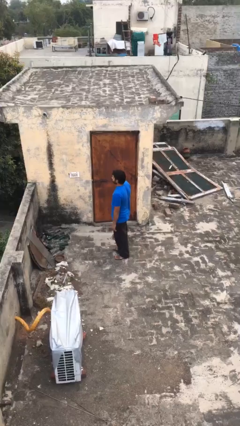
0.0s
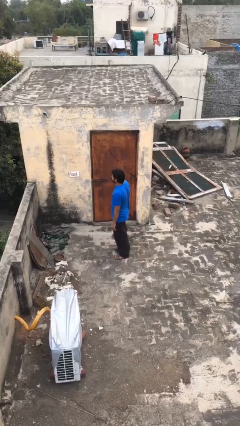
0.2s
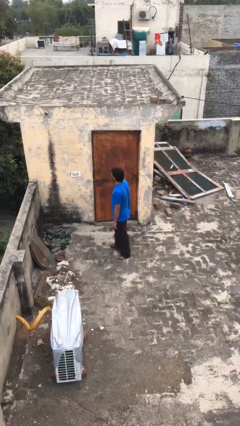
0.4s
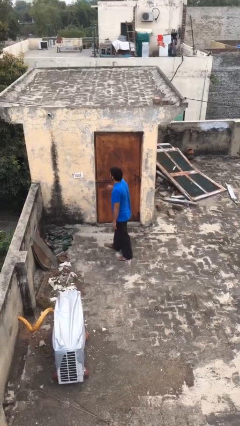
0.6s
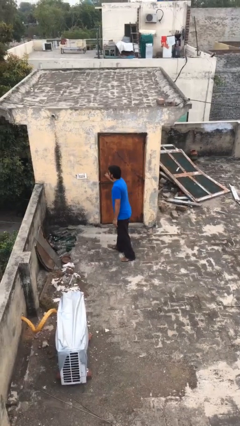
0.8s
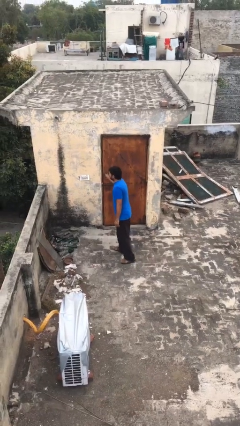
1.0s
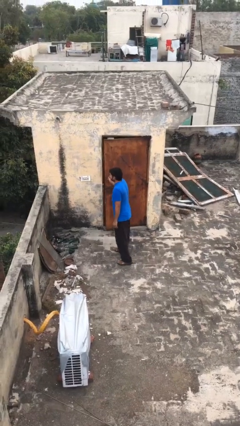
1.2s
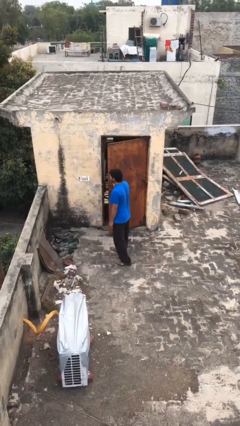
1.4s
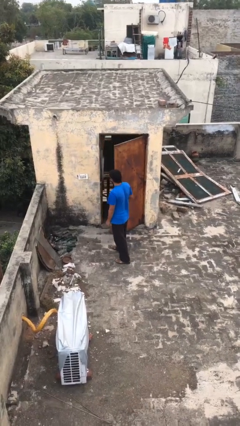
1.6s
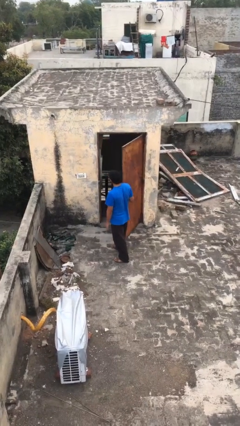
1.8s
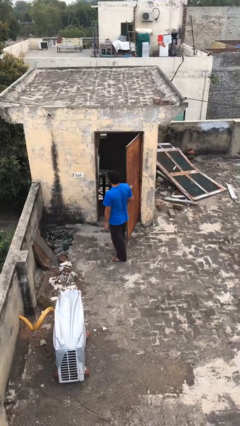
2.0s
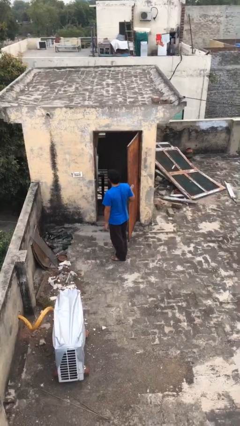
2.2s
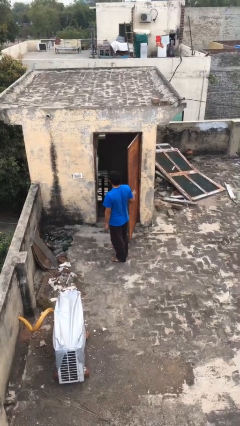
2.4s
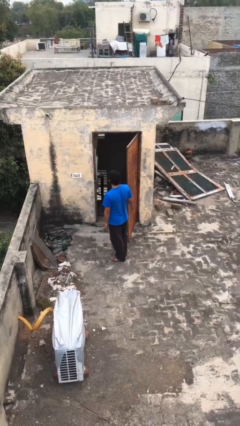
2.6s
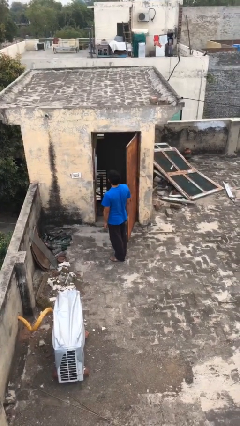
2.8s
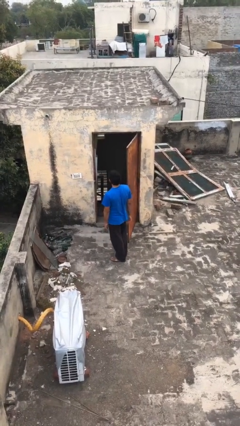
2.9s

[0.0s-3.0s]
person opens facility door

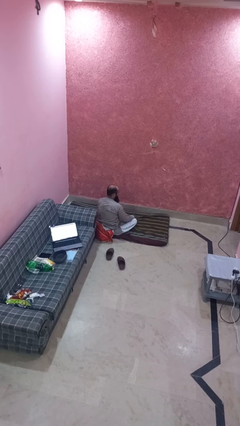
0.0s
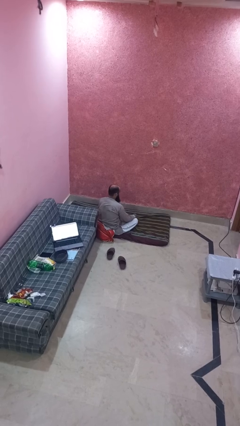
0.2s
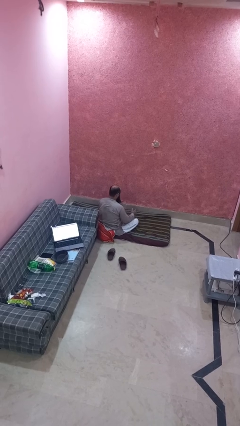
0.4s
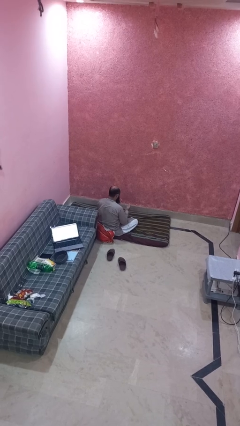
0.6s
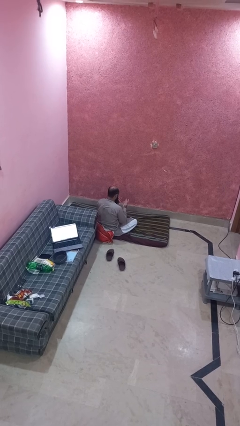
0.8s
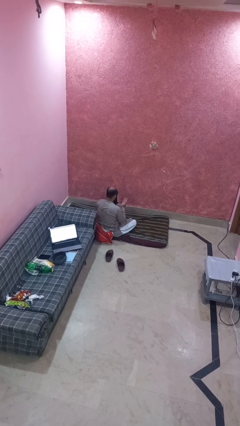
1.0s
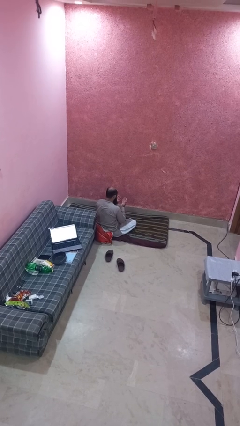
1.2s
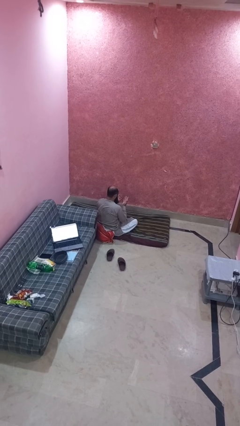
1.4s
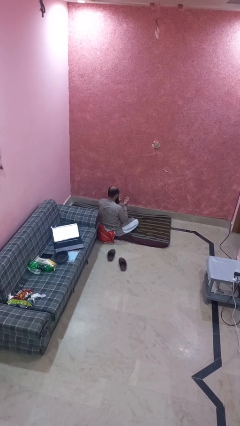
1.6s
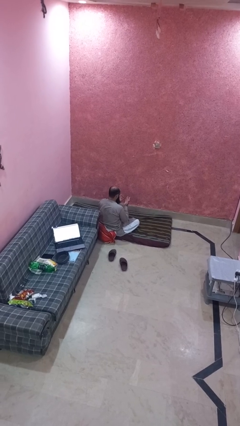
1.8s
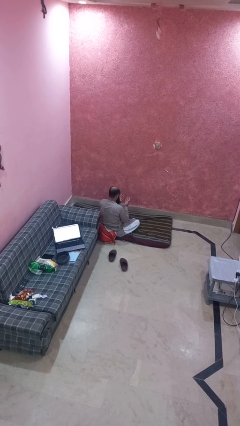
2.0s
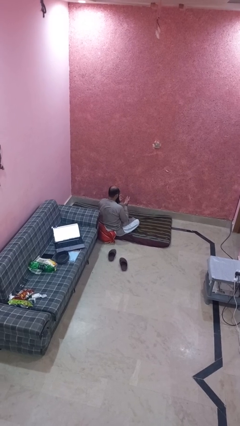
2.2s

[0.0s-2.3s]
person looks at hands in lap

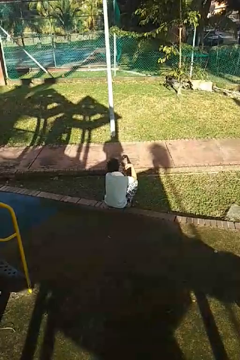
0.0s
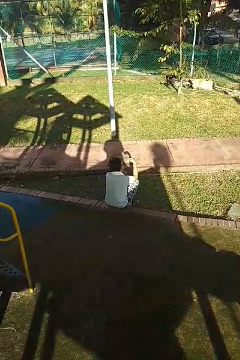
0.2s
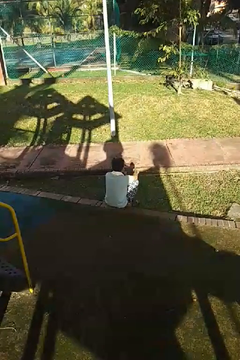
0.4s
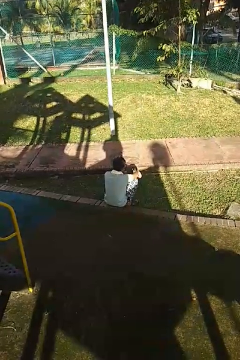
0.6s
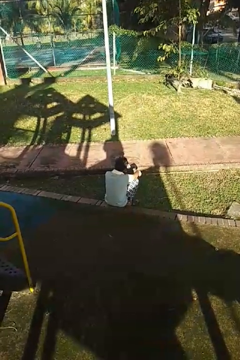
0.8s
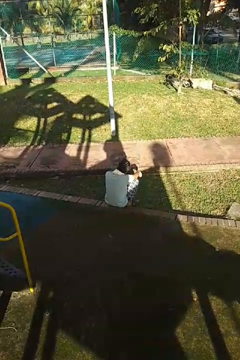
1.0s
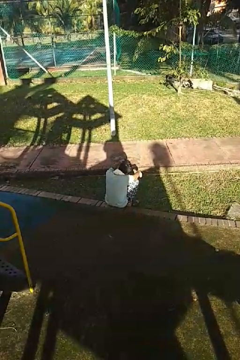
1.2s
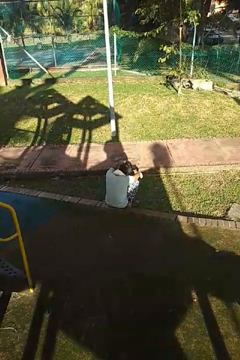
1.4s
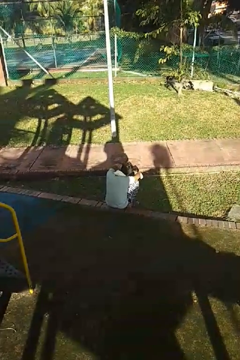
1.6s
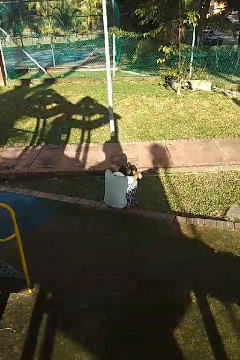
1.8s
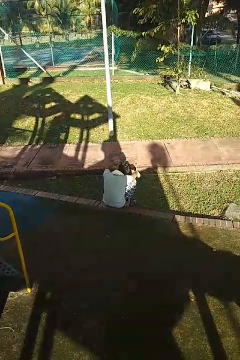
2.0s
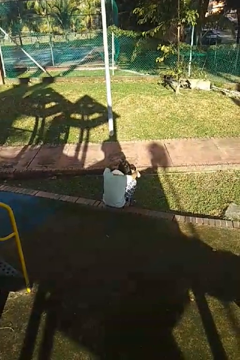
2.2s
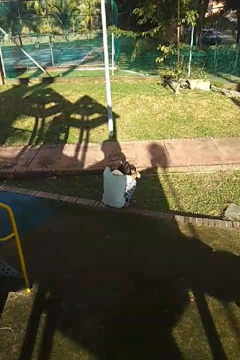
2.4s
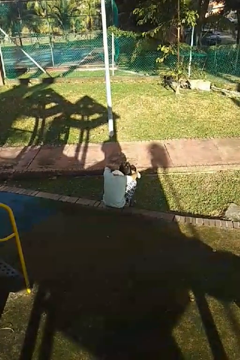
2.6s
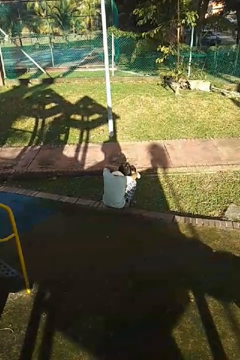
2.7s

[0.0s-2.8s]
person strokes hair

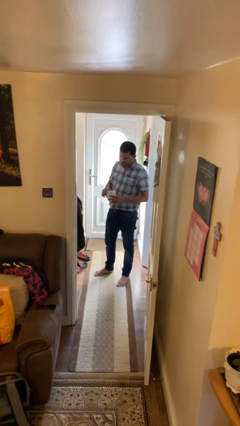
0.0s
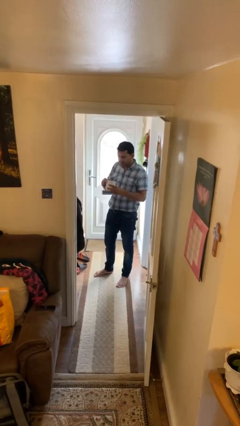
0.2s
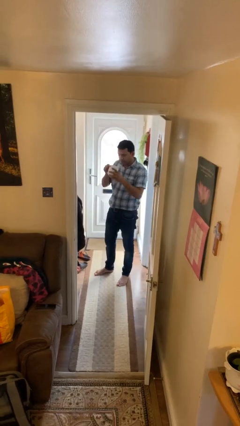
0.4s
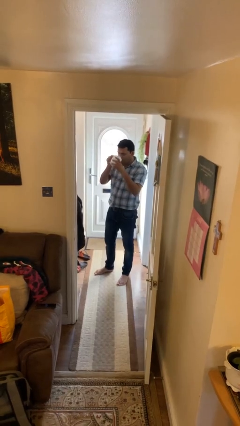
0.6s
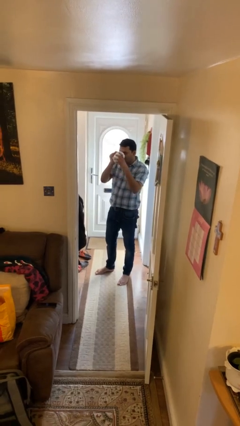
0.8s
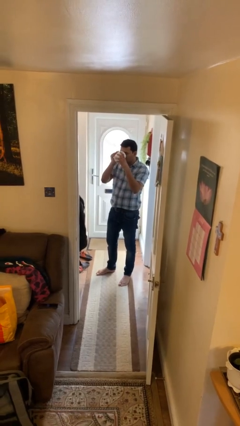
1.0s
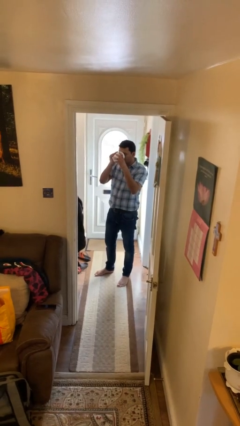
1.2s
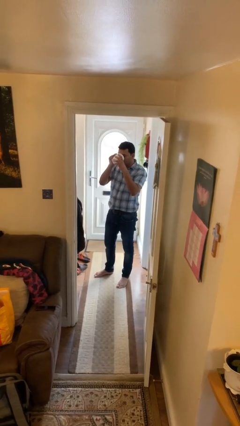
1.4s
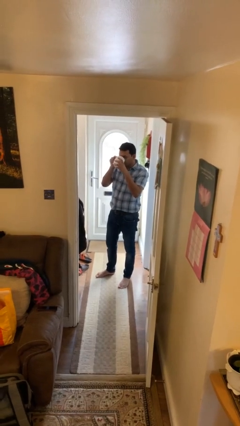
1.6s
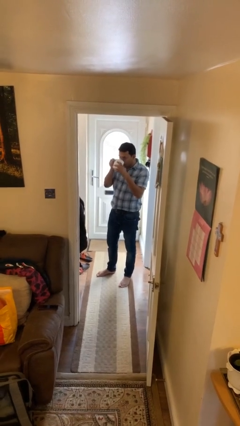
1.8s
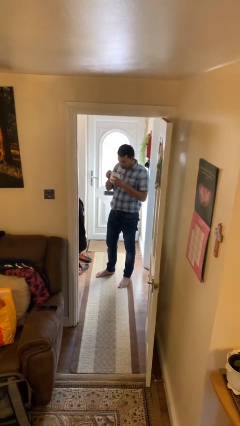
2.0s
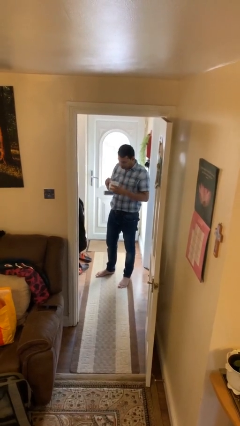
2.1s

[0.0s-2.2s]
person drinks from mug

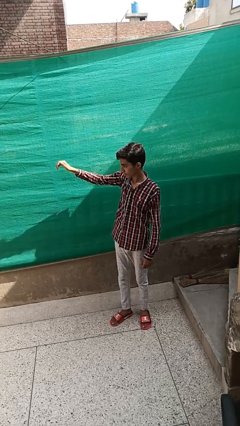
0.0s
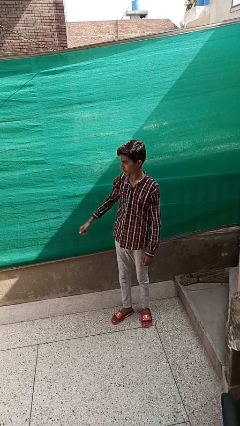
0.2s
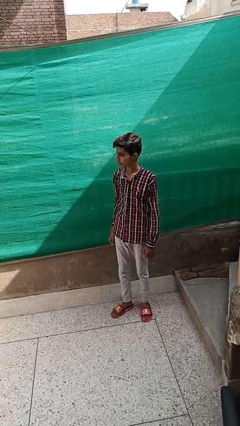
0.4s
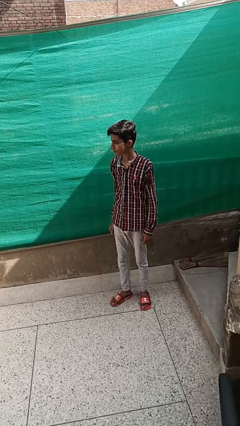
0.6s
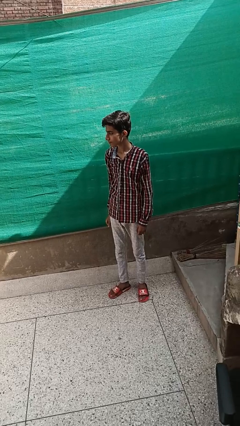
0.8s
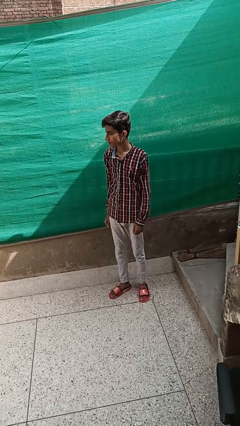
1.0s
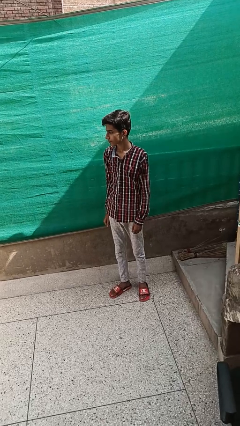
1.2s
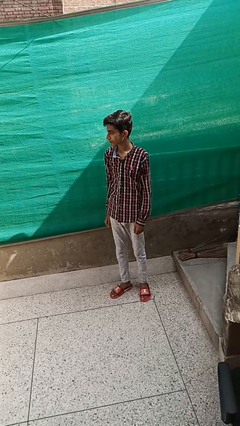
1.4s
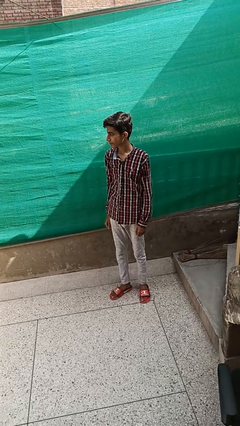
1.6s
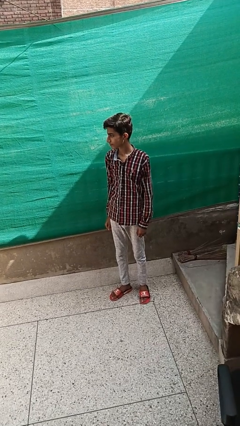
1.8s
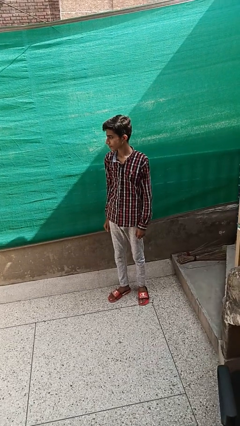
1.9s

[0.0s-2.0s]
person gestures lower hand

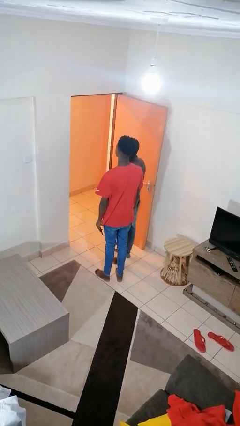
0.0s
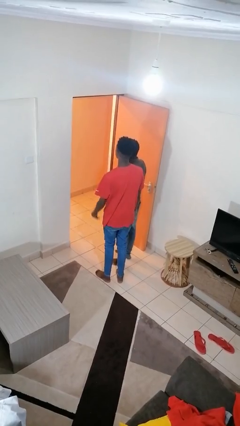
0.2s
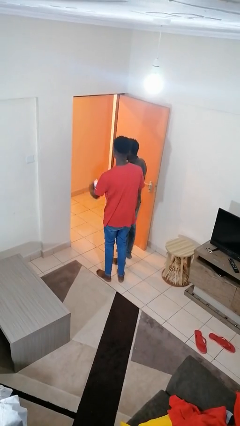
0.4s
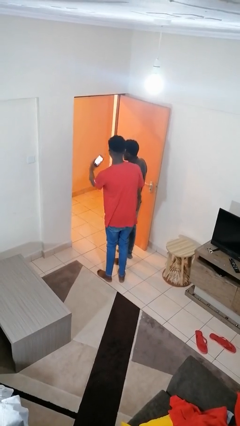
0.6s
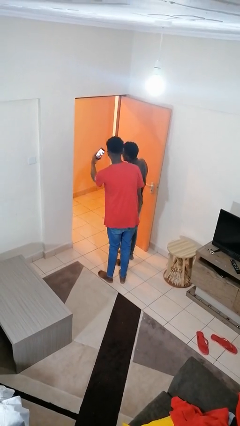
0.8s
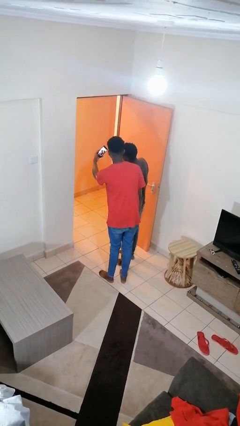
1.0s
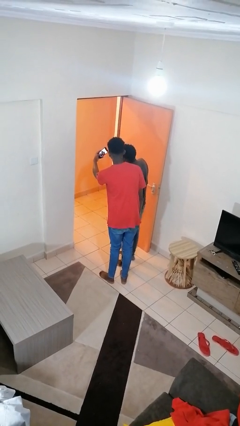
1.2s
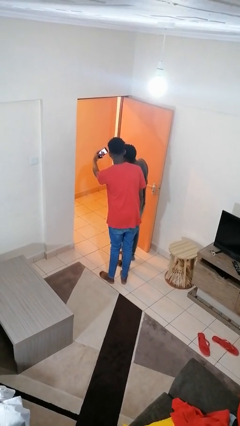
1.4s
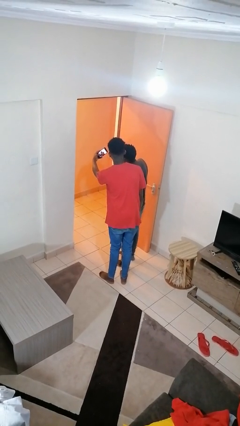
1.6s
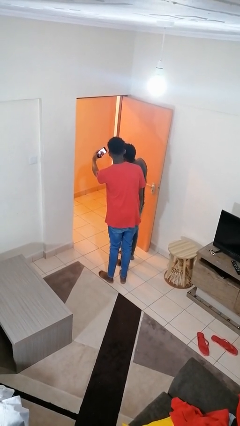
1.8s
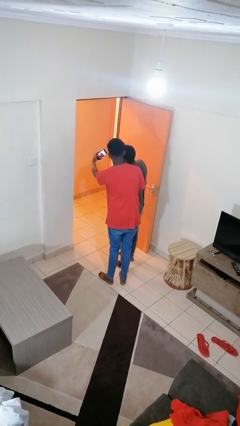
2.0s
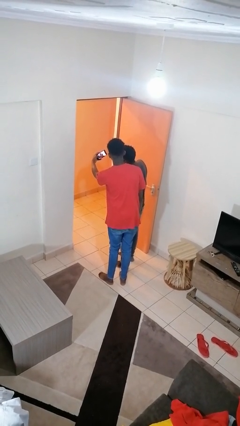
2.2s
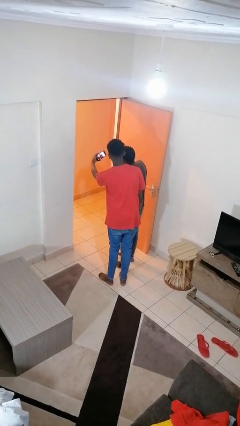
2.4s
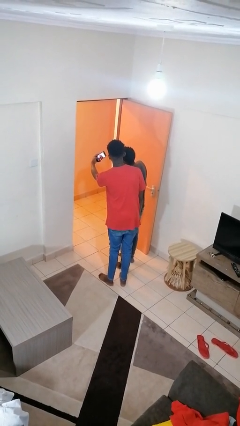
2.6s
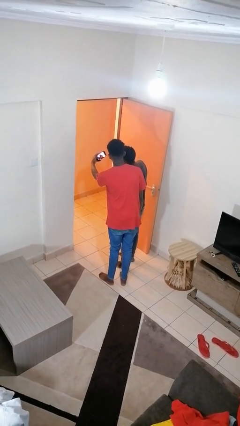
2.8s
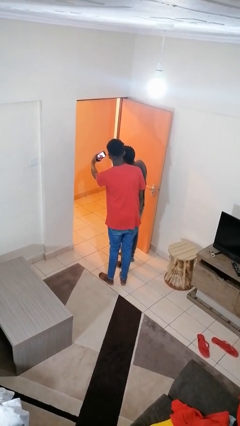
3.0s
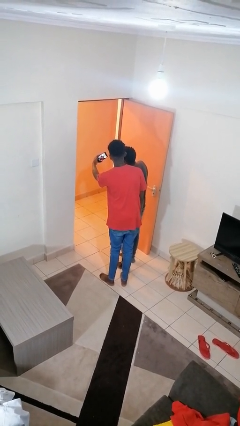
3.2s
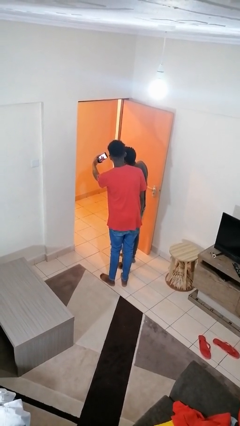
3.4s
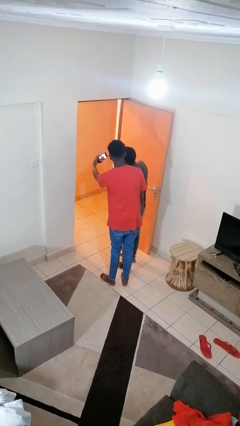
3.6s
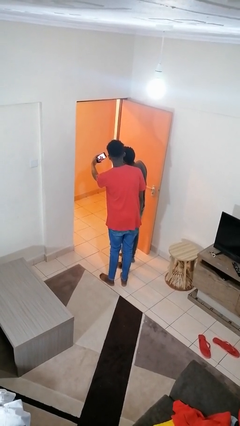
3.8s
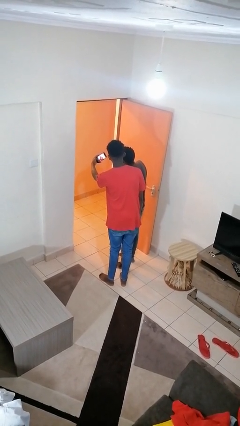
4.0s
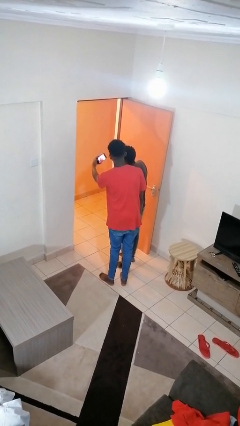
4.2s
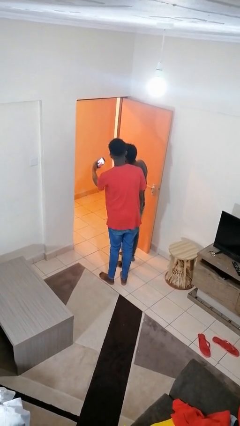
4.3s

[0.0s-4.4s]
person takes selfie with person

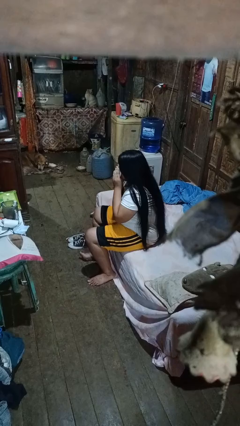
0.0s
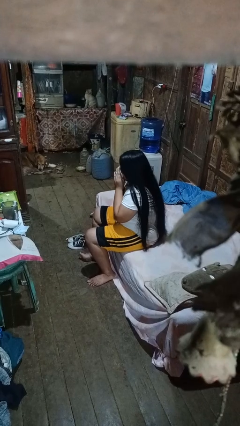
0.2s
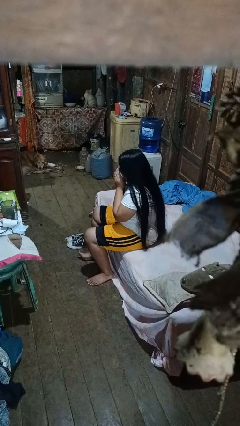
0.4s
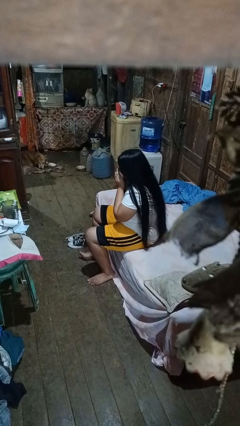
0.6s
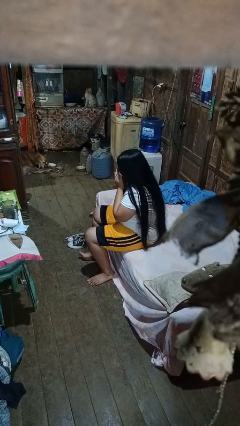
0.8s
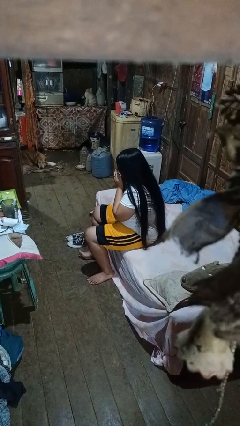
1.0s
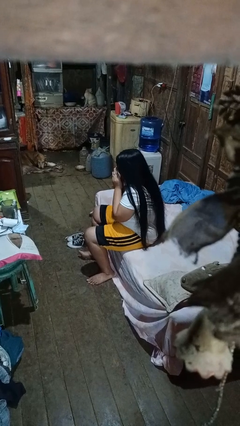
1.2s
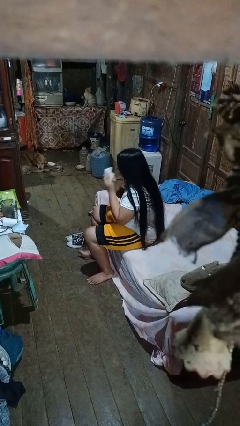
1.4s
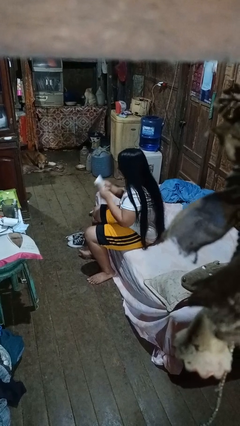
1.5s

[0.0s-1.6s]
person blows nose
